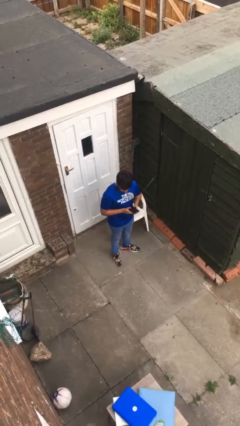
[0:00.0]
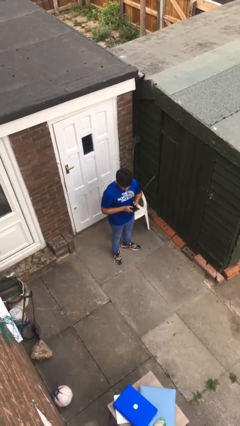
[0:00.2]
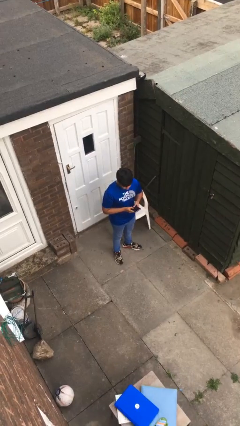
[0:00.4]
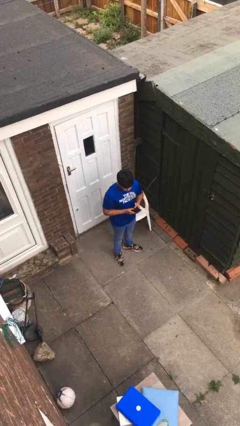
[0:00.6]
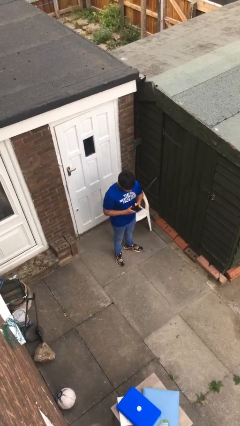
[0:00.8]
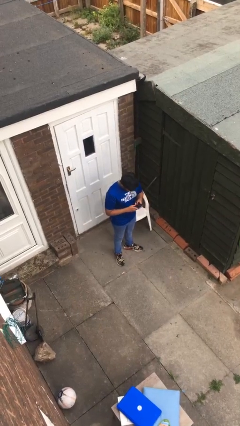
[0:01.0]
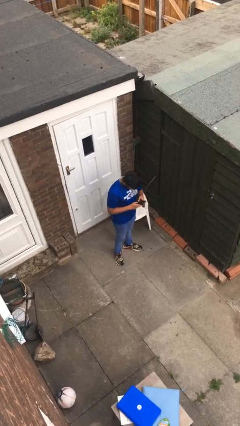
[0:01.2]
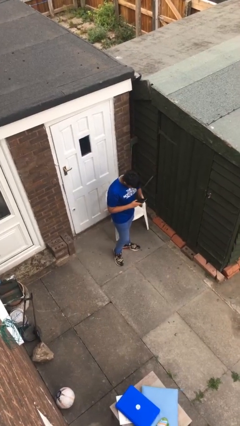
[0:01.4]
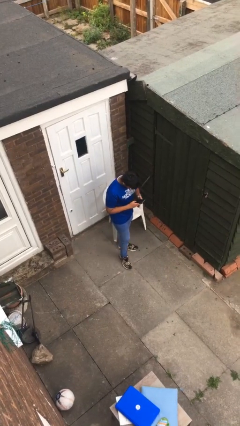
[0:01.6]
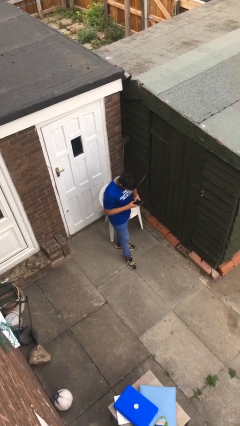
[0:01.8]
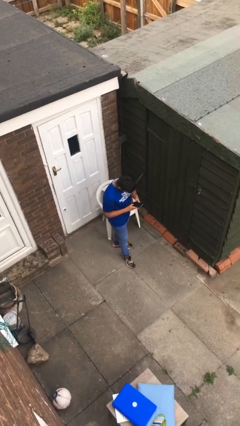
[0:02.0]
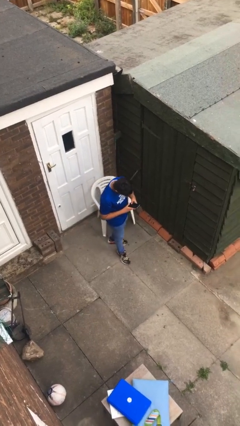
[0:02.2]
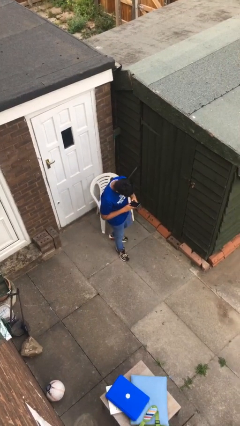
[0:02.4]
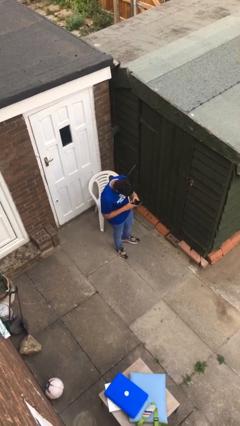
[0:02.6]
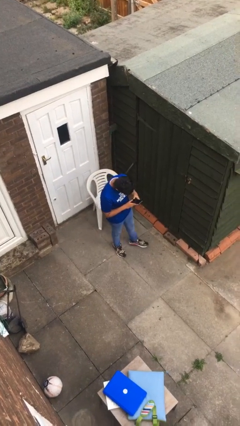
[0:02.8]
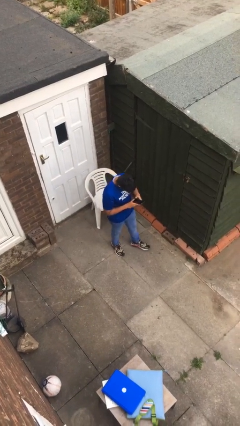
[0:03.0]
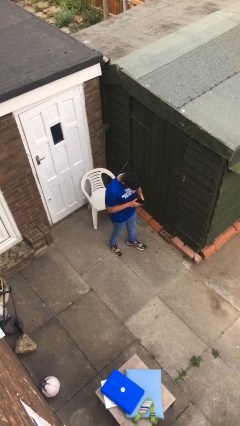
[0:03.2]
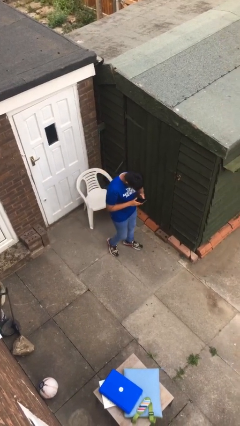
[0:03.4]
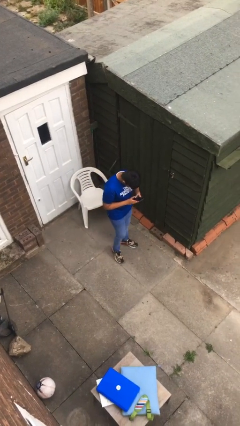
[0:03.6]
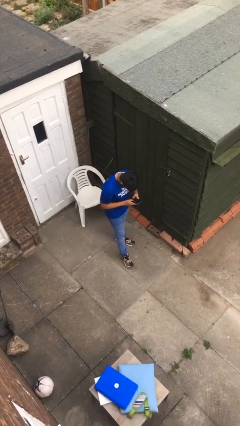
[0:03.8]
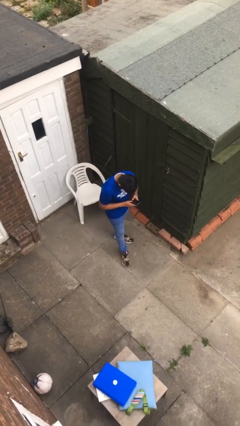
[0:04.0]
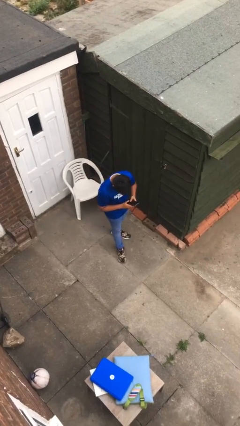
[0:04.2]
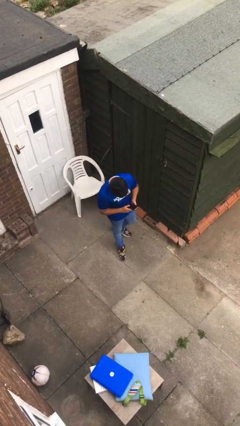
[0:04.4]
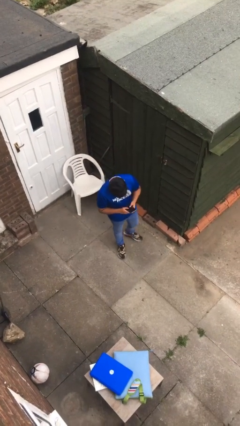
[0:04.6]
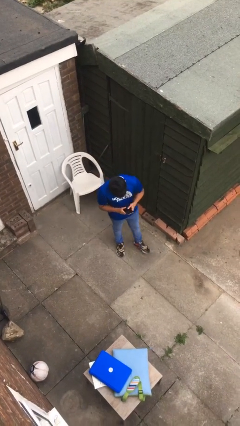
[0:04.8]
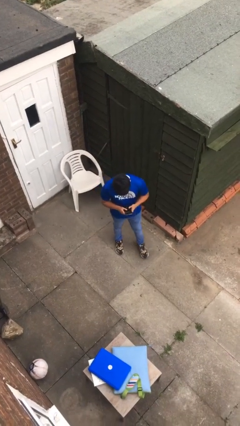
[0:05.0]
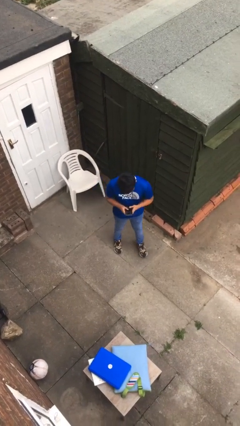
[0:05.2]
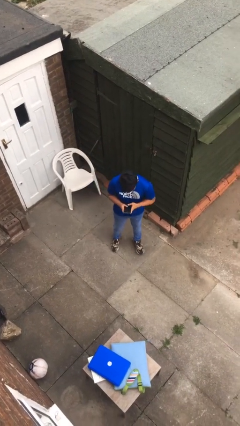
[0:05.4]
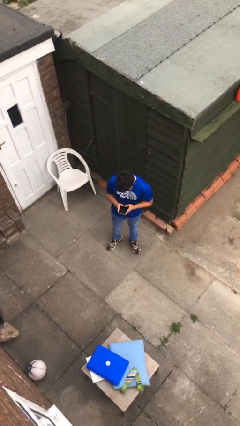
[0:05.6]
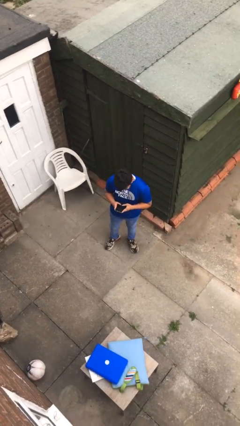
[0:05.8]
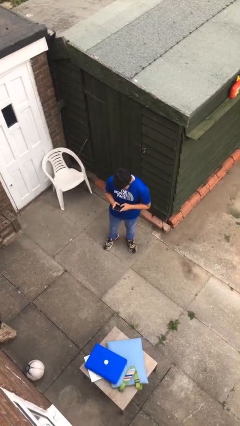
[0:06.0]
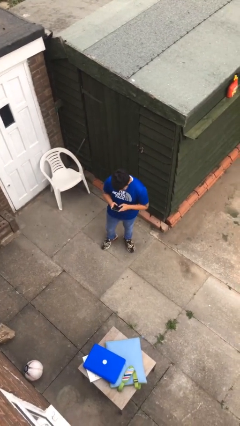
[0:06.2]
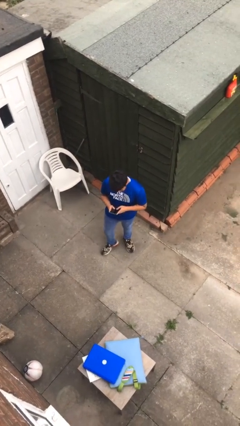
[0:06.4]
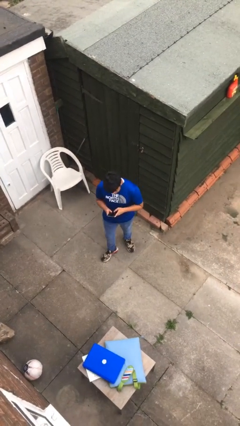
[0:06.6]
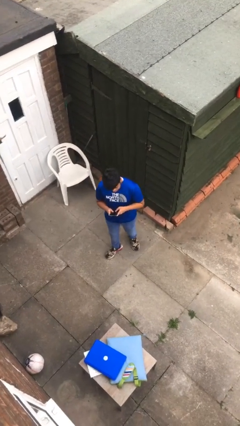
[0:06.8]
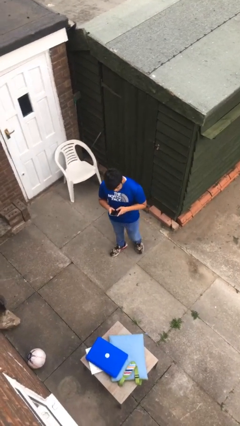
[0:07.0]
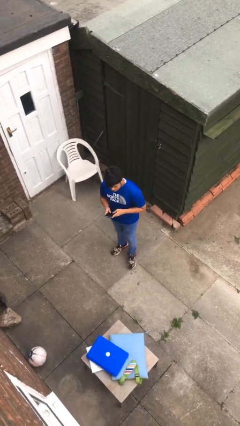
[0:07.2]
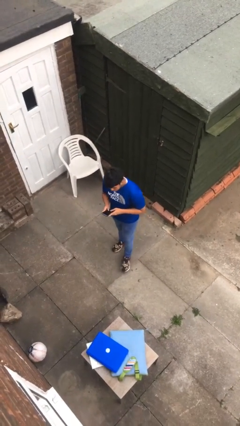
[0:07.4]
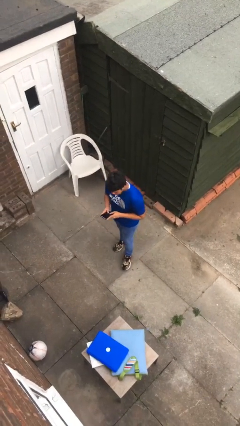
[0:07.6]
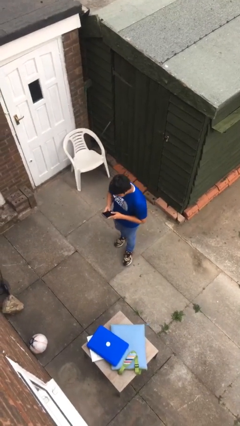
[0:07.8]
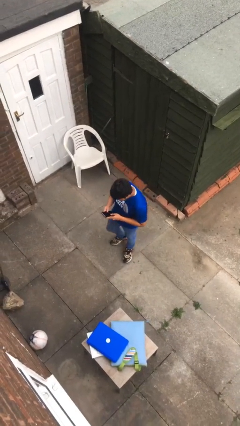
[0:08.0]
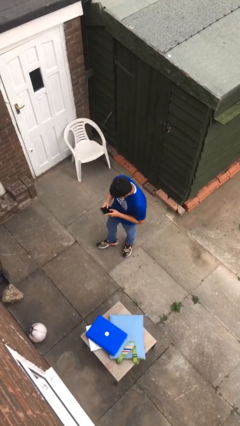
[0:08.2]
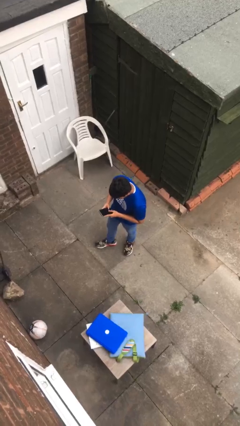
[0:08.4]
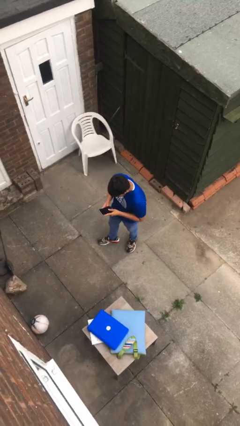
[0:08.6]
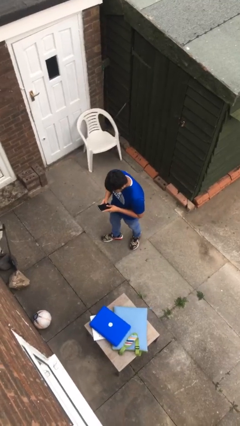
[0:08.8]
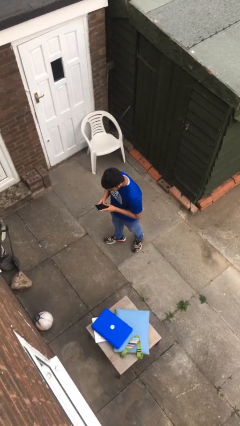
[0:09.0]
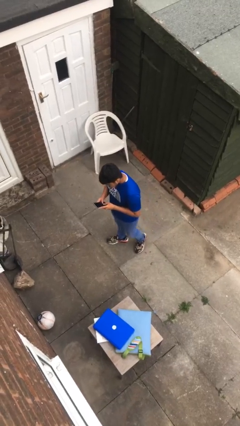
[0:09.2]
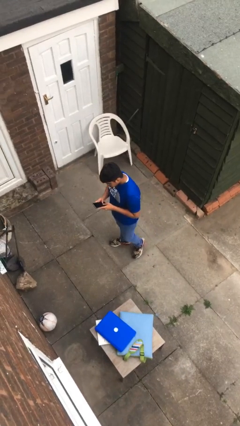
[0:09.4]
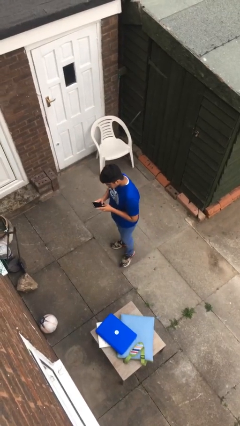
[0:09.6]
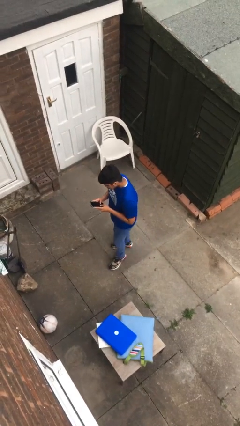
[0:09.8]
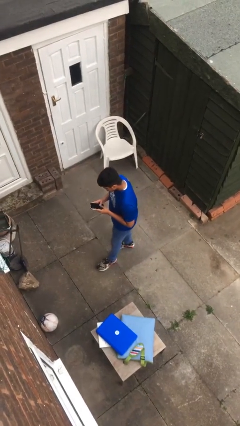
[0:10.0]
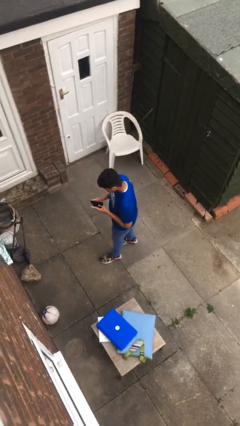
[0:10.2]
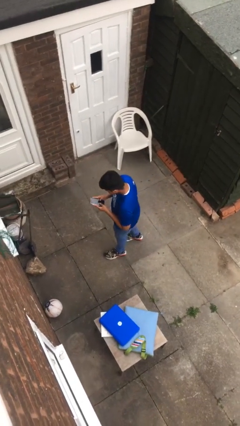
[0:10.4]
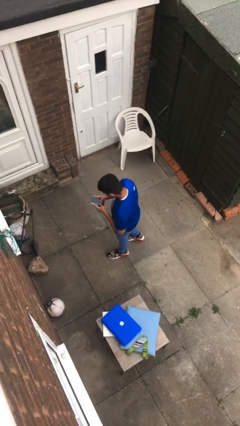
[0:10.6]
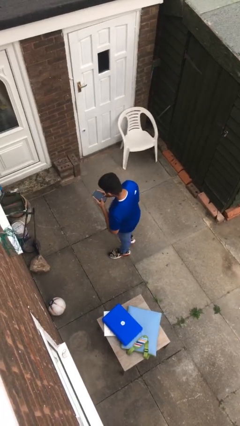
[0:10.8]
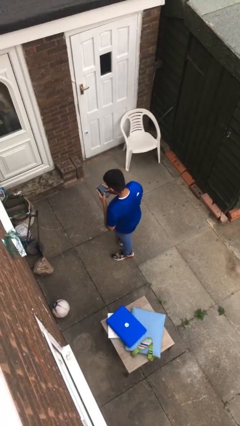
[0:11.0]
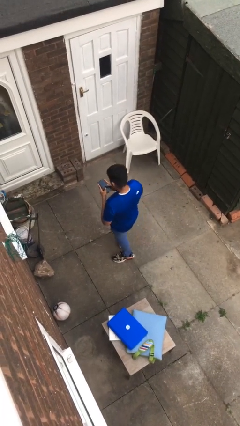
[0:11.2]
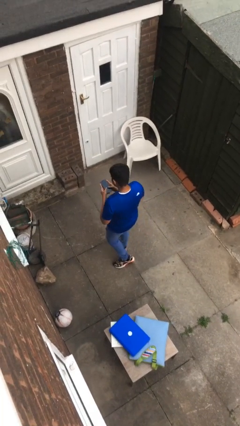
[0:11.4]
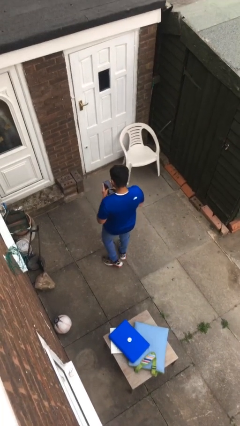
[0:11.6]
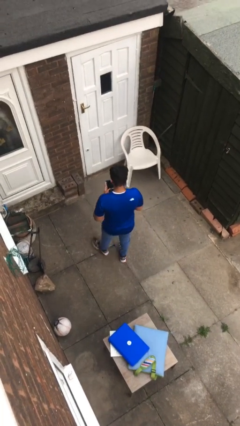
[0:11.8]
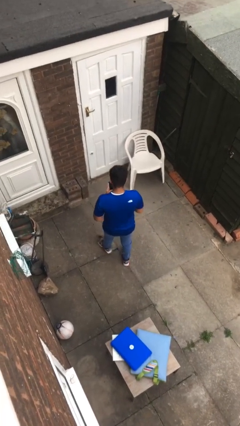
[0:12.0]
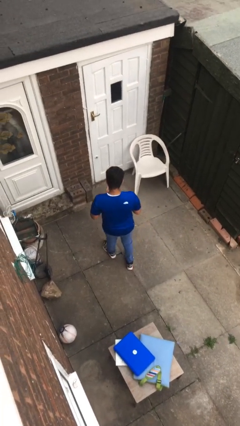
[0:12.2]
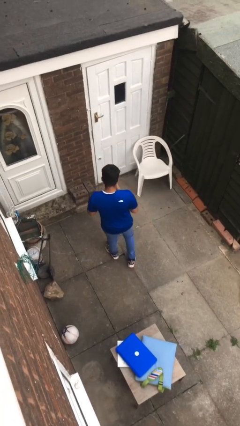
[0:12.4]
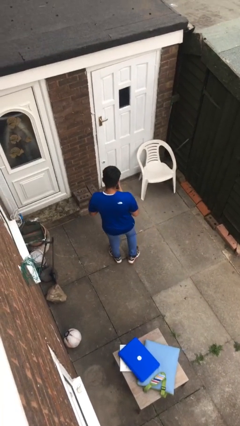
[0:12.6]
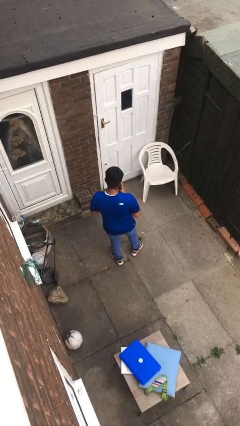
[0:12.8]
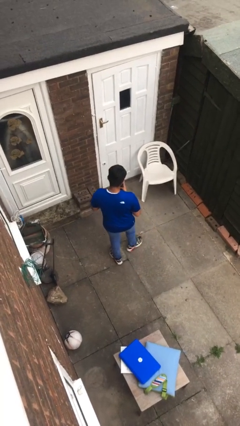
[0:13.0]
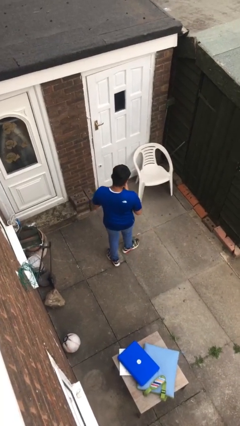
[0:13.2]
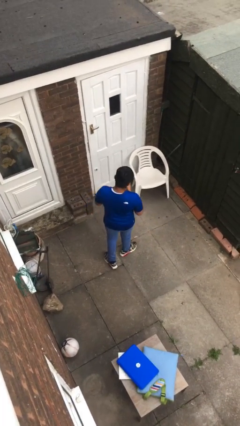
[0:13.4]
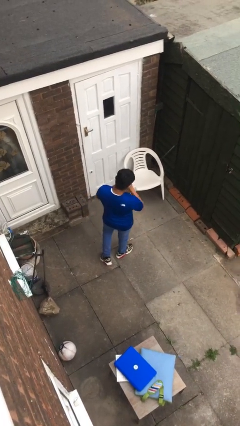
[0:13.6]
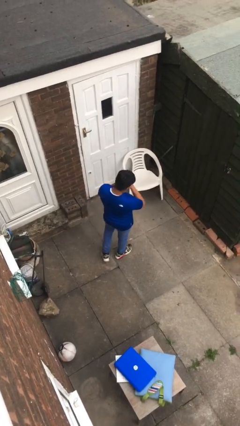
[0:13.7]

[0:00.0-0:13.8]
person texts on phone

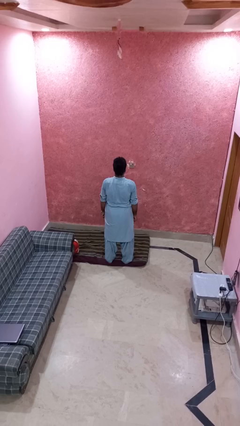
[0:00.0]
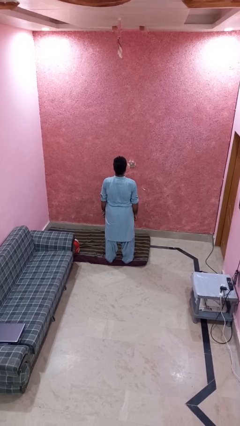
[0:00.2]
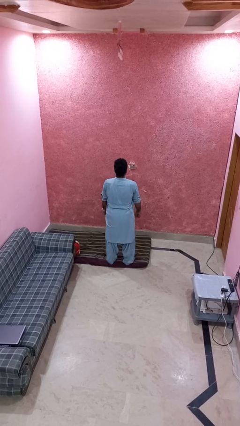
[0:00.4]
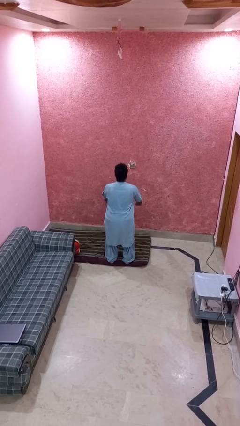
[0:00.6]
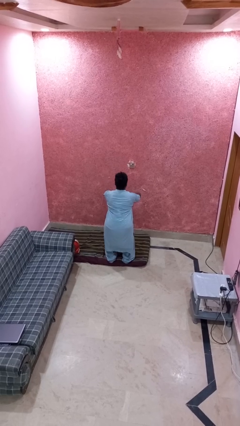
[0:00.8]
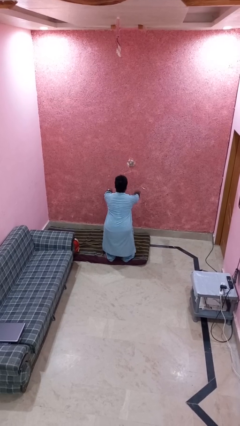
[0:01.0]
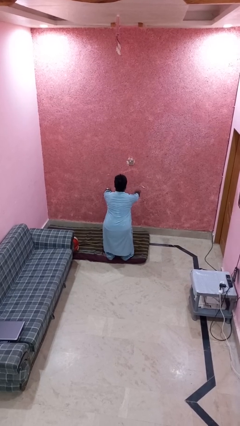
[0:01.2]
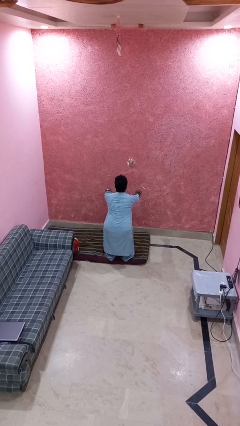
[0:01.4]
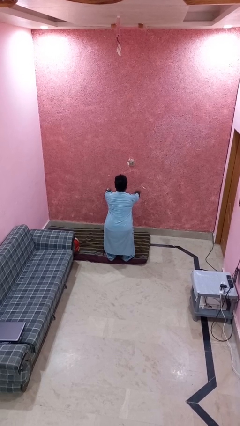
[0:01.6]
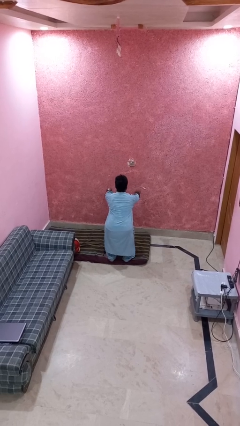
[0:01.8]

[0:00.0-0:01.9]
person squats

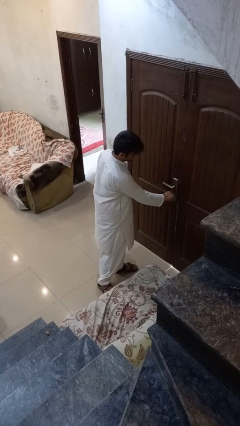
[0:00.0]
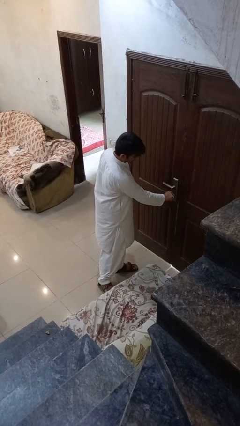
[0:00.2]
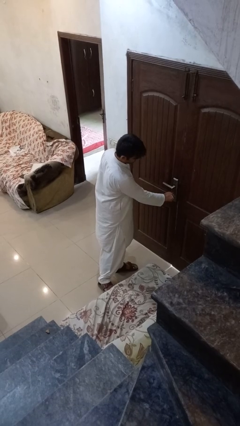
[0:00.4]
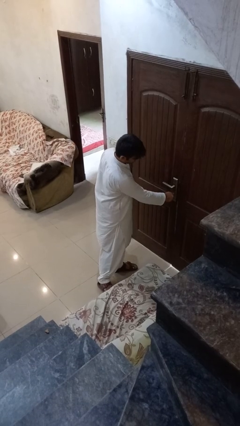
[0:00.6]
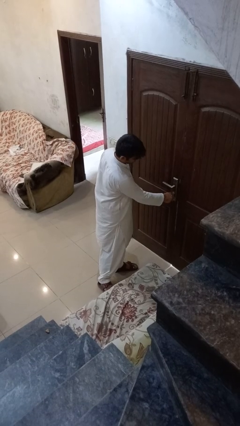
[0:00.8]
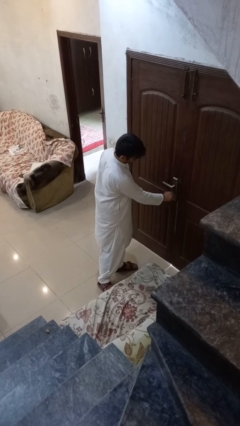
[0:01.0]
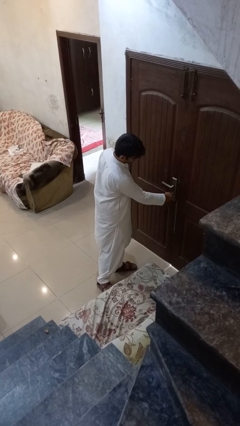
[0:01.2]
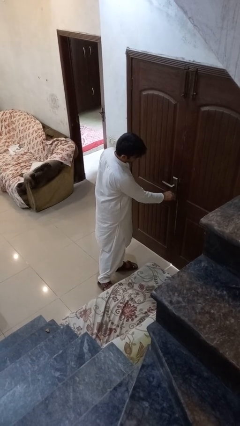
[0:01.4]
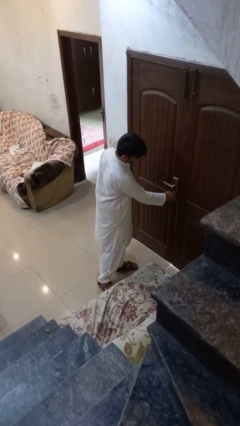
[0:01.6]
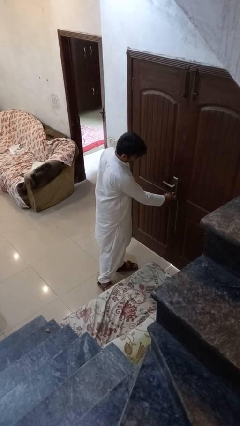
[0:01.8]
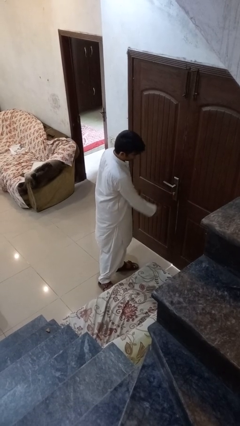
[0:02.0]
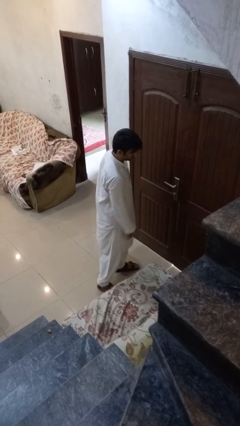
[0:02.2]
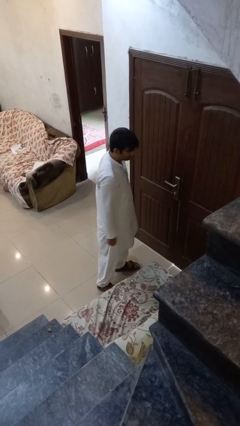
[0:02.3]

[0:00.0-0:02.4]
person locks door with keys
